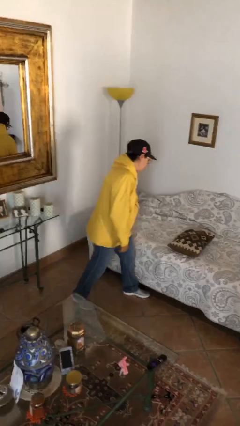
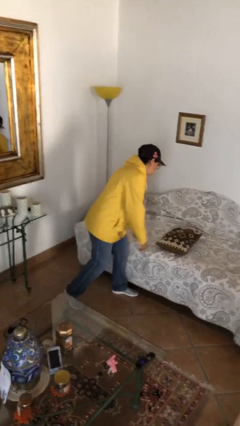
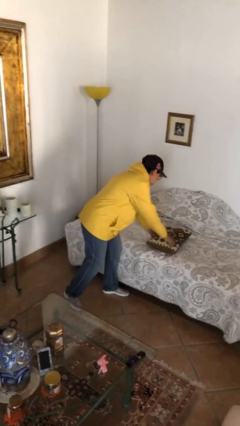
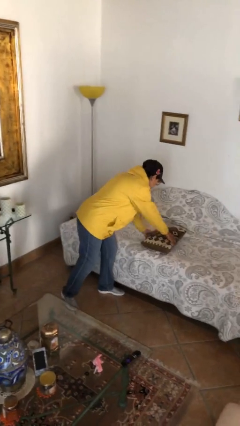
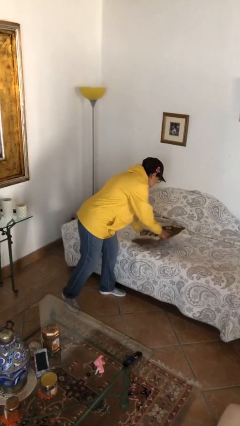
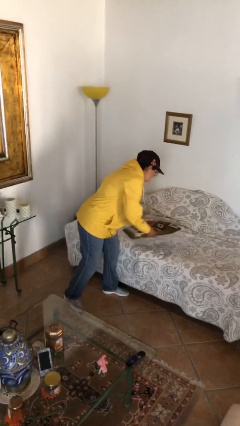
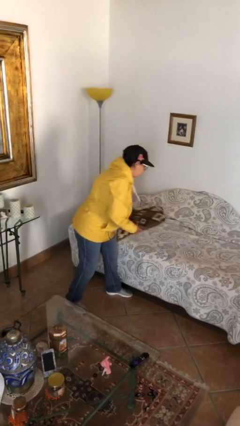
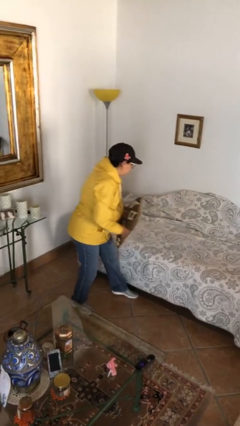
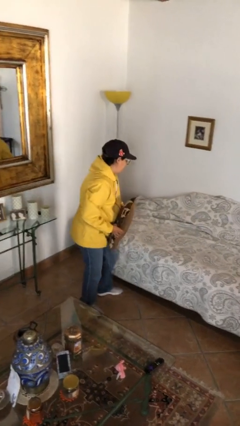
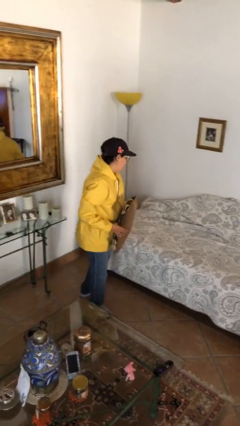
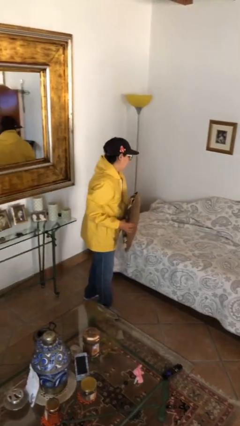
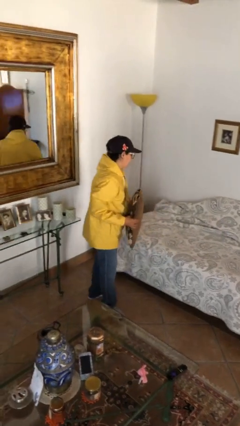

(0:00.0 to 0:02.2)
person picks up object from bed

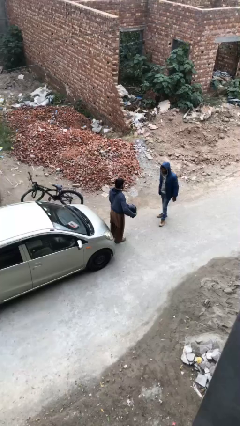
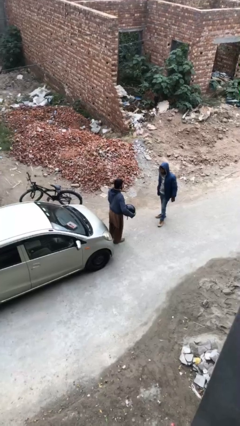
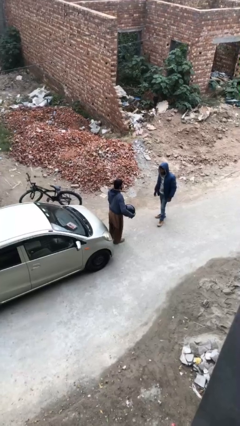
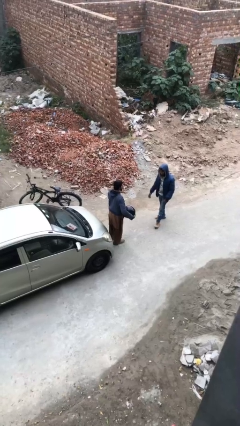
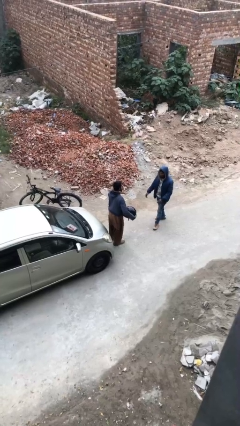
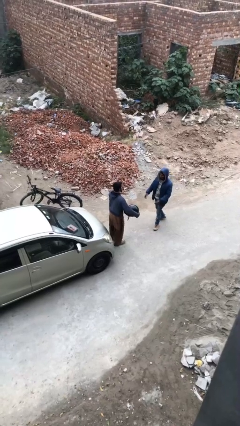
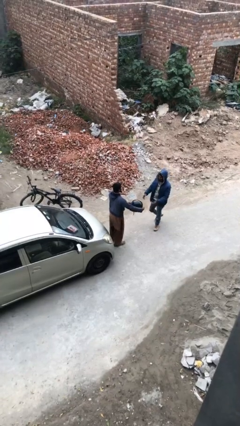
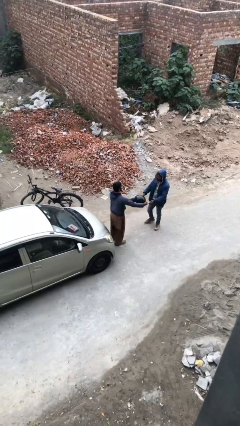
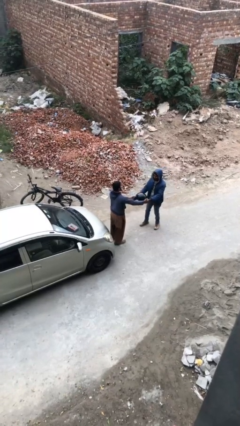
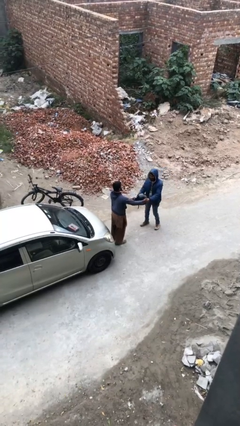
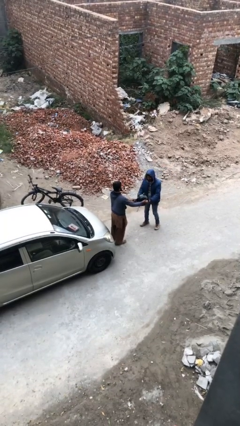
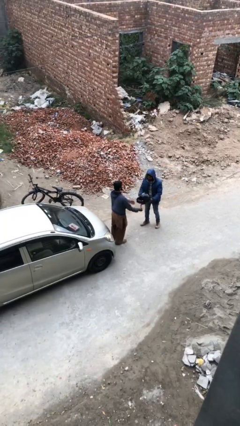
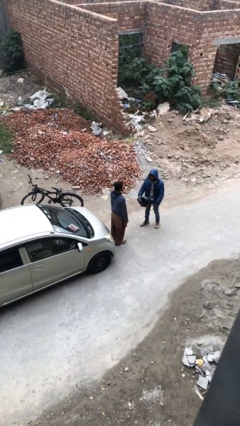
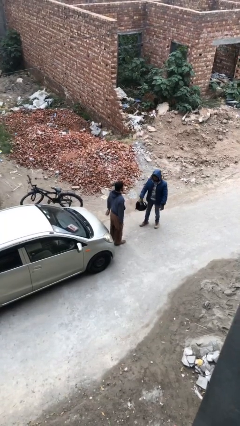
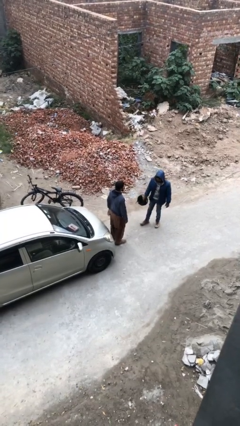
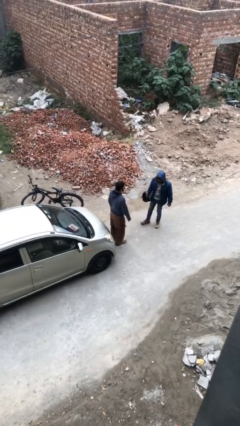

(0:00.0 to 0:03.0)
person transfers object to person

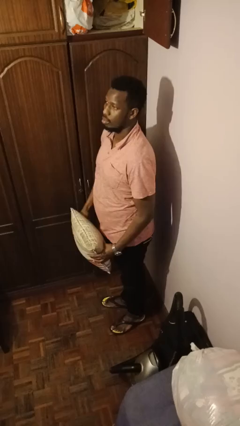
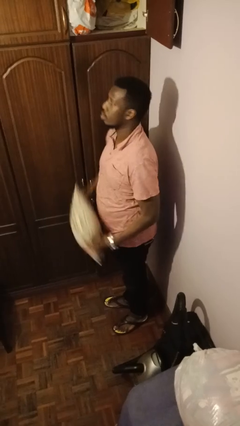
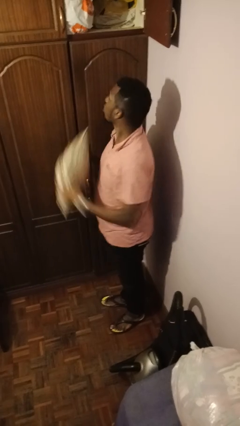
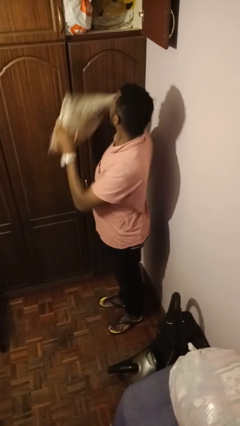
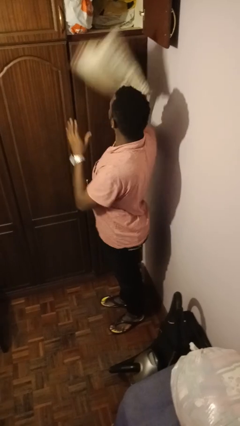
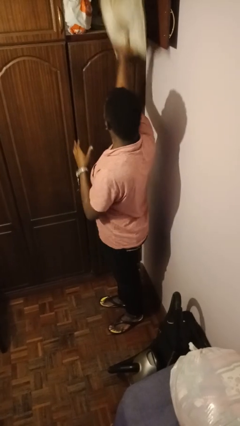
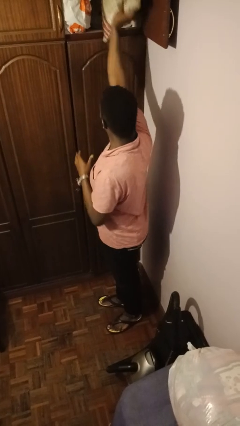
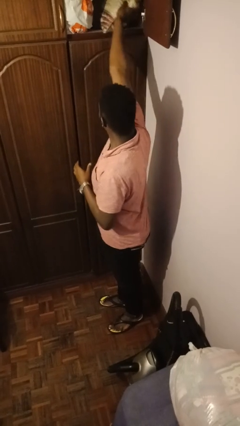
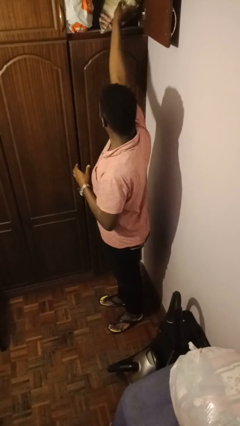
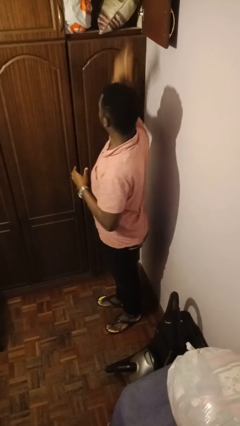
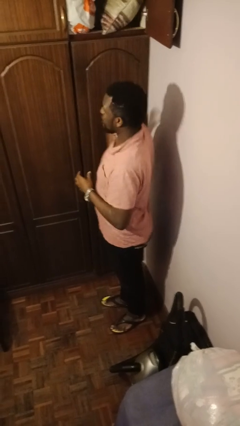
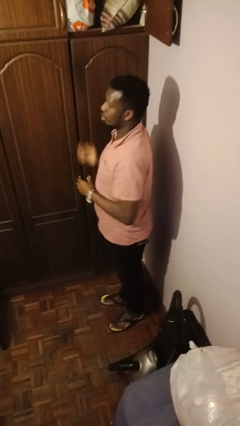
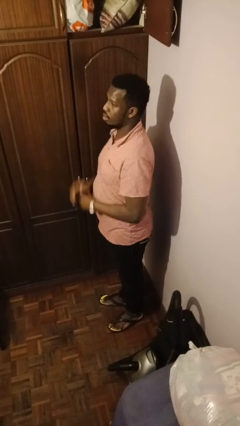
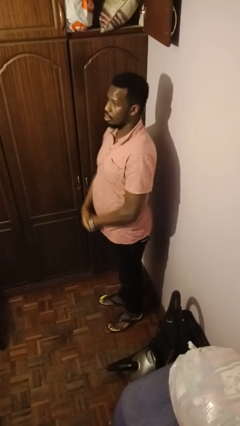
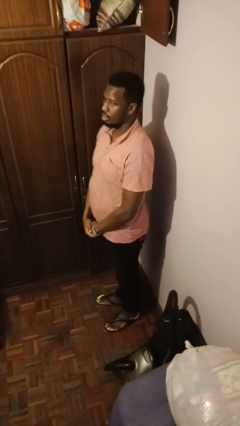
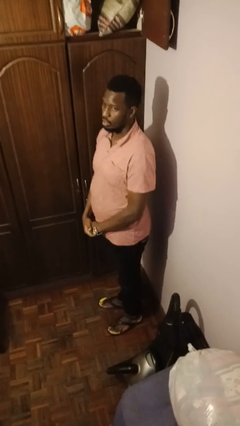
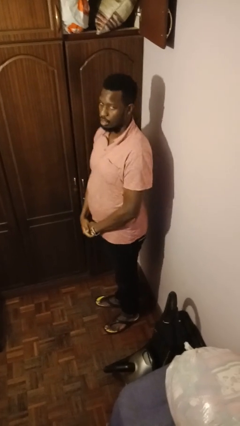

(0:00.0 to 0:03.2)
person puts down object on shelf

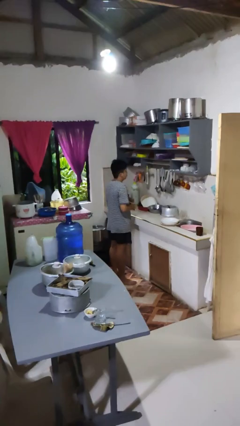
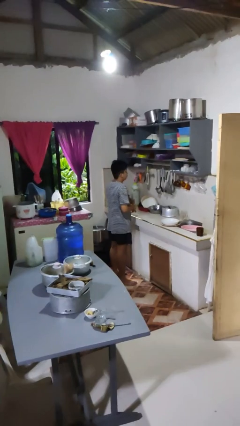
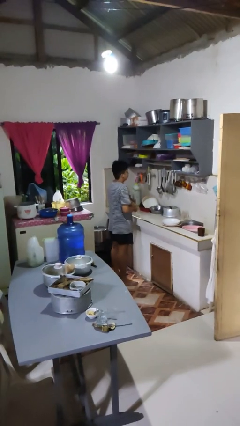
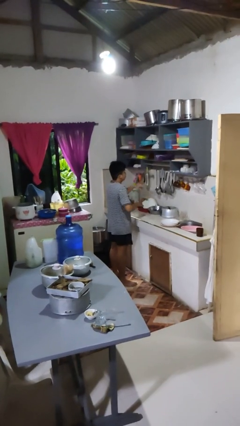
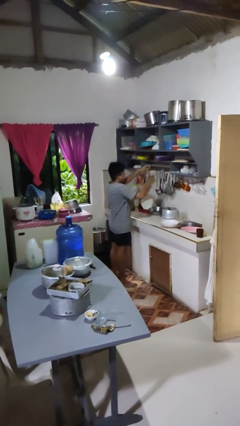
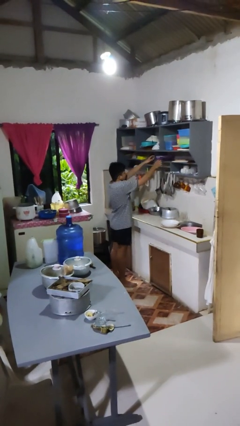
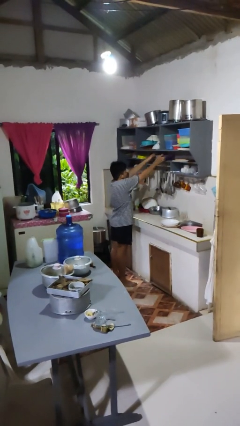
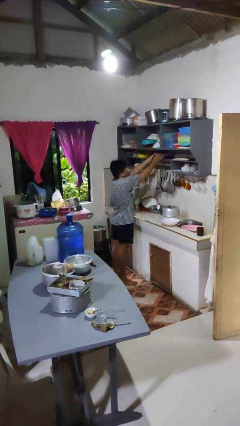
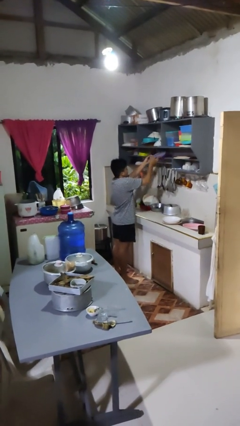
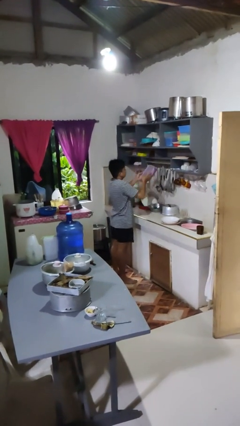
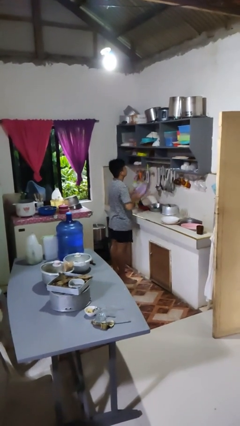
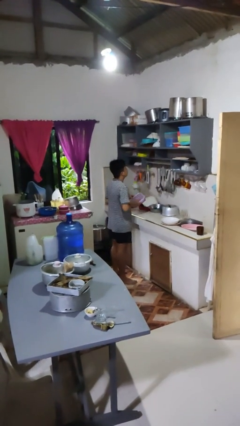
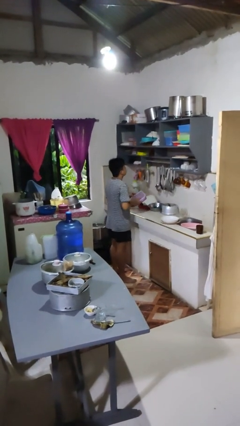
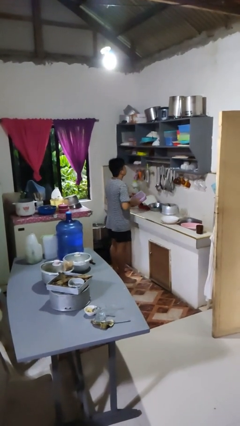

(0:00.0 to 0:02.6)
person picks up object from cabinet

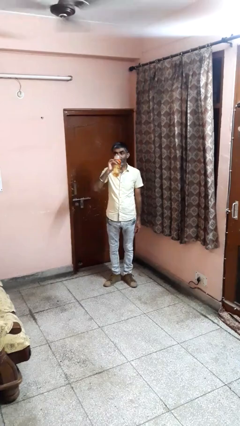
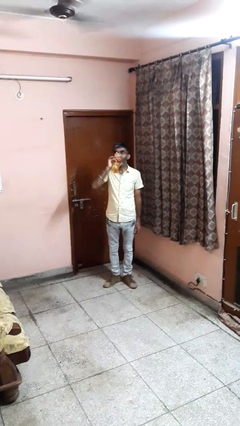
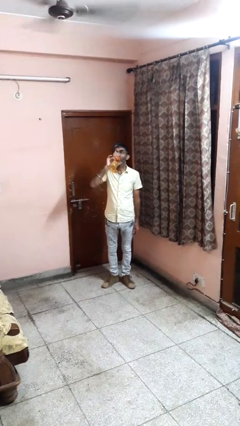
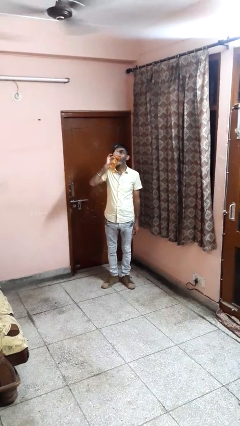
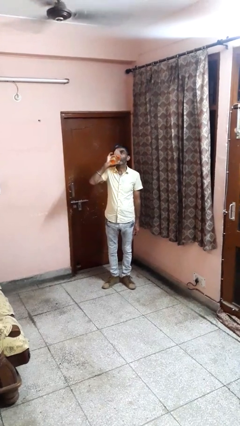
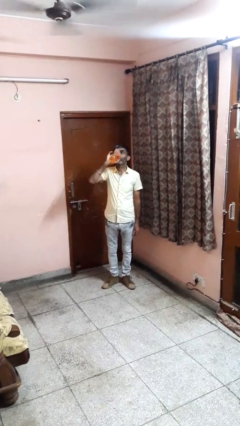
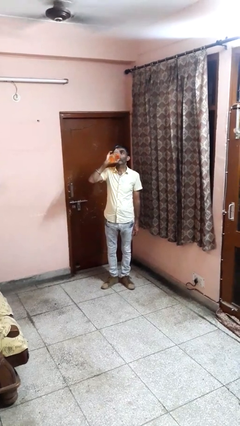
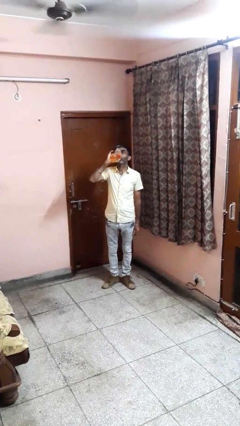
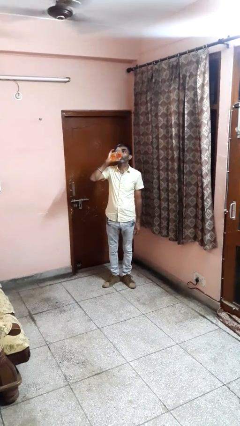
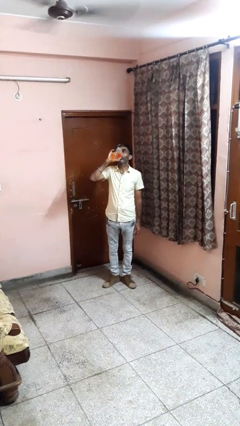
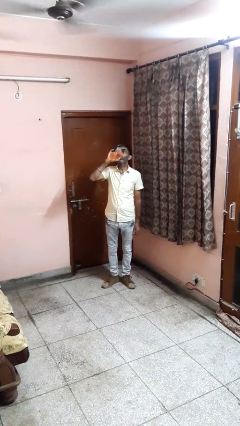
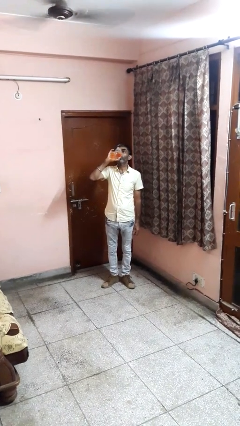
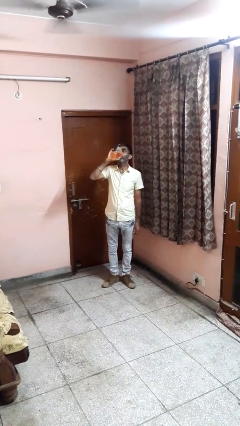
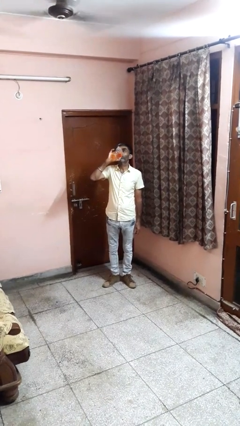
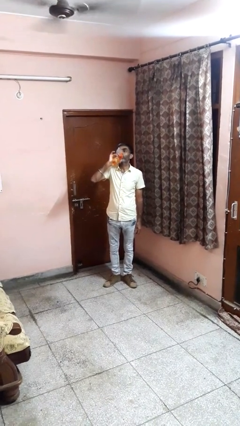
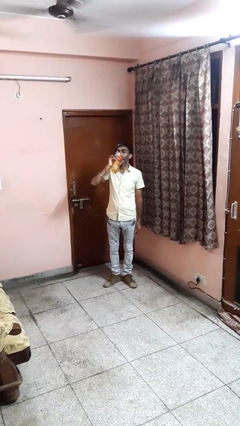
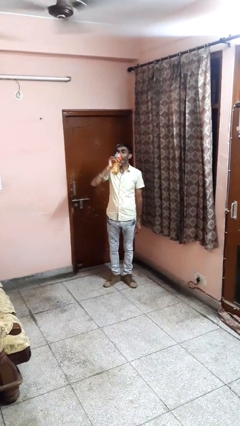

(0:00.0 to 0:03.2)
person drinks from bottle

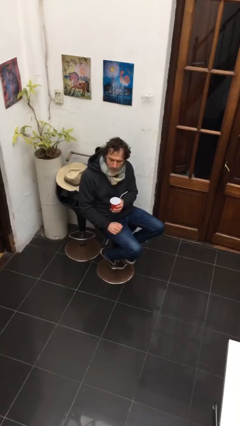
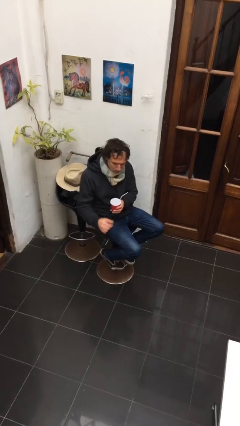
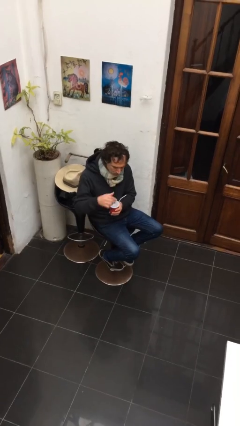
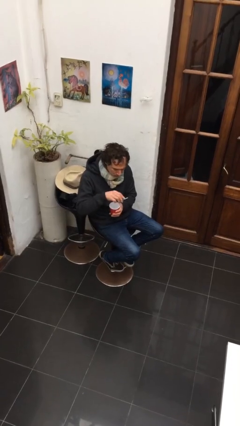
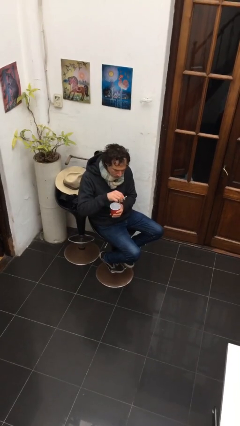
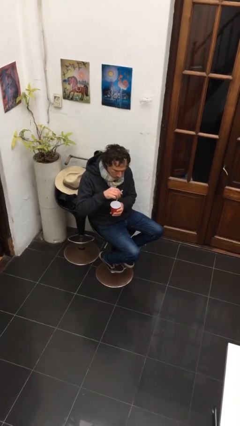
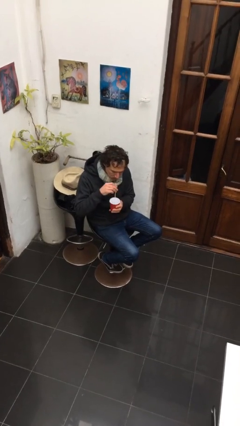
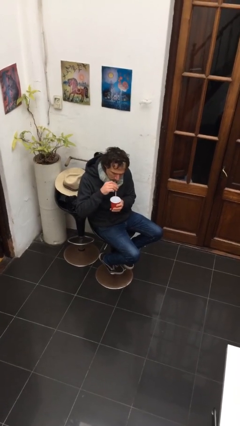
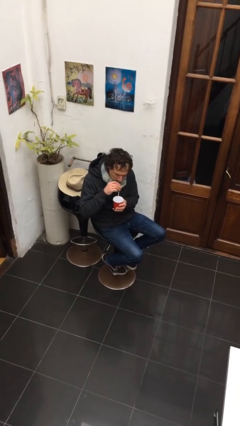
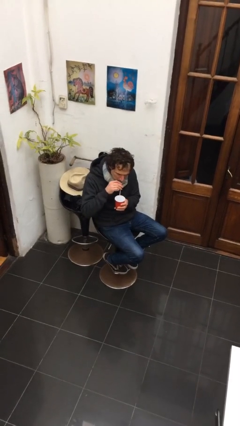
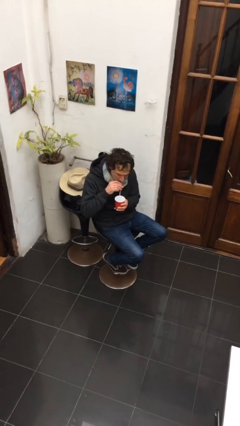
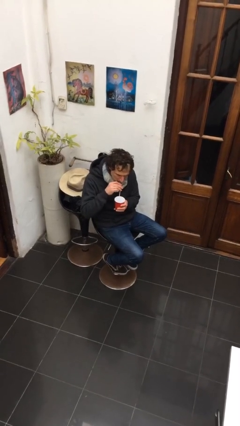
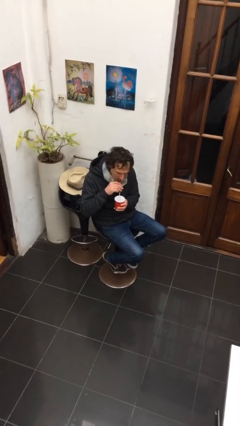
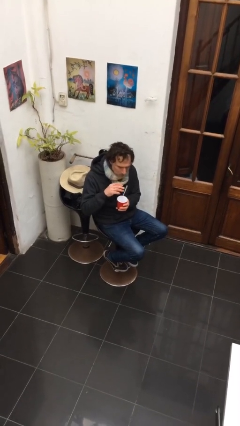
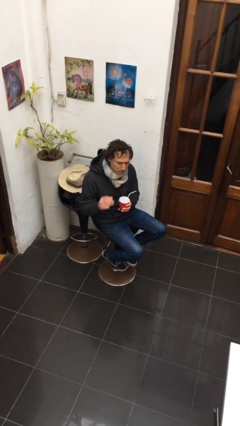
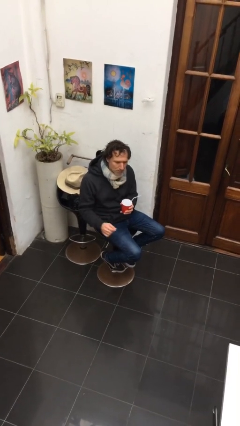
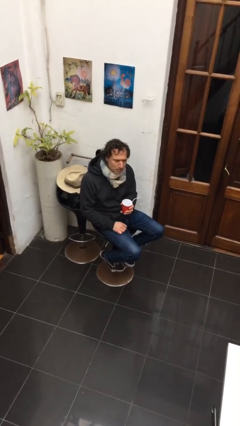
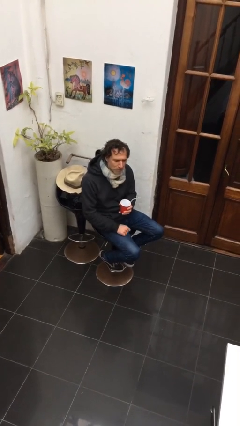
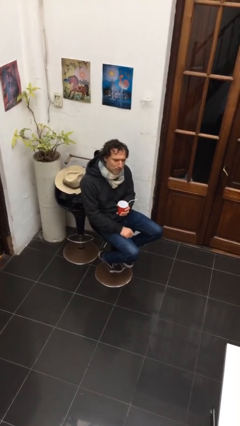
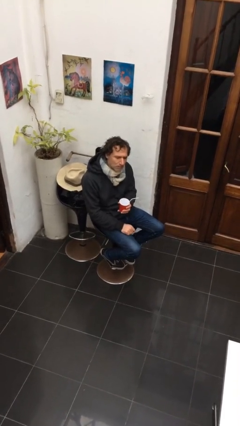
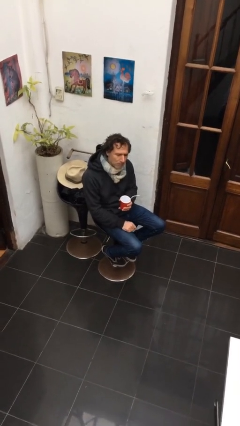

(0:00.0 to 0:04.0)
person drinks from straw
